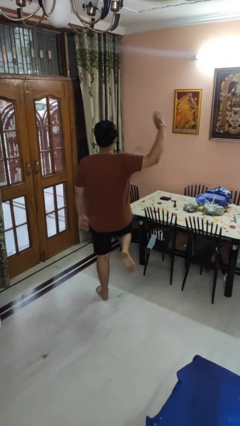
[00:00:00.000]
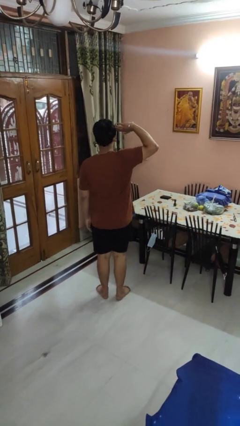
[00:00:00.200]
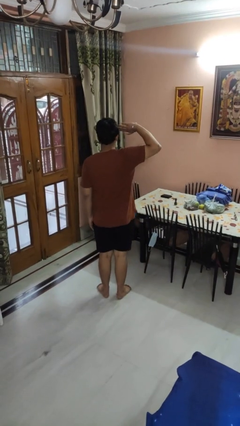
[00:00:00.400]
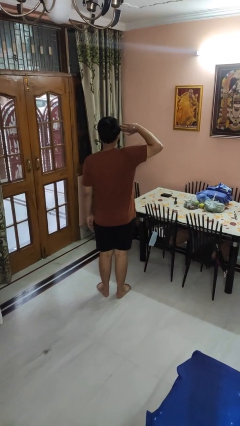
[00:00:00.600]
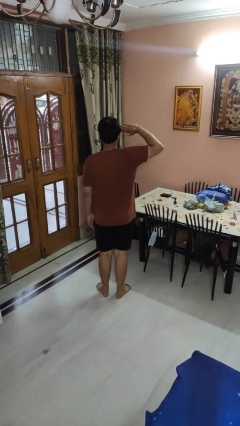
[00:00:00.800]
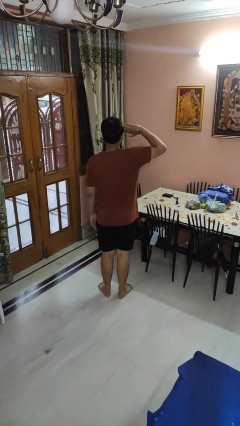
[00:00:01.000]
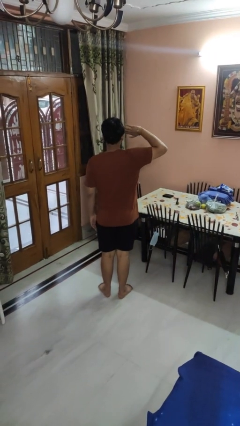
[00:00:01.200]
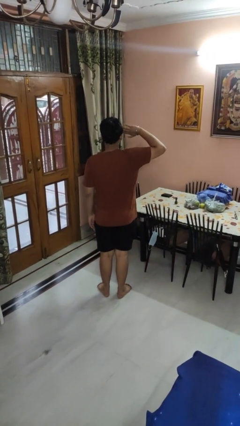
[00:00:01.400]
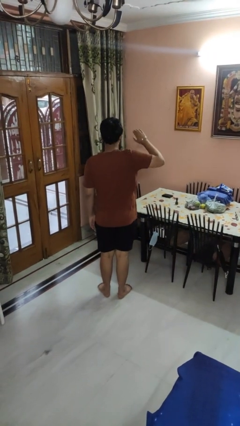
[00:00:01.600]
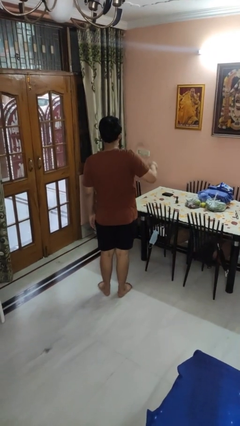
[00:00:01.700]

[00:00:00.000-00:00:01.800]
person salutes

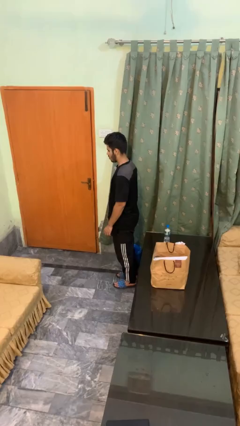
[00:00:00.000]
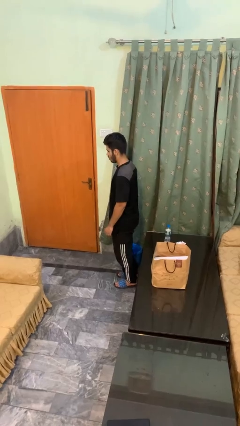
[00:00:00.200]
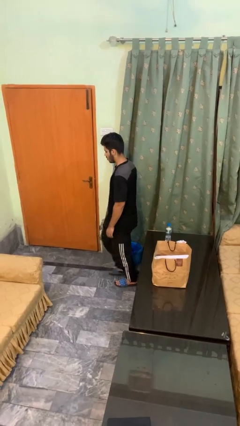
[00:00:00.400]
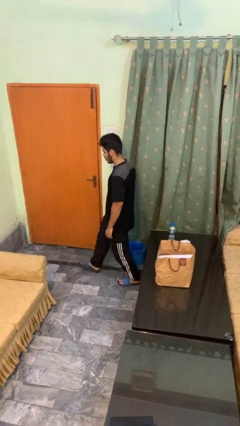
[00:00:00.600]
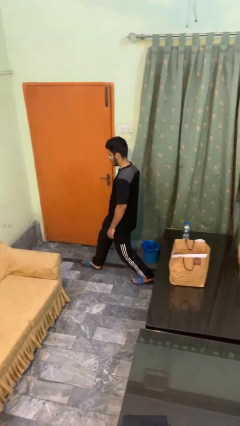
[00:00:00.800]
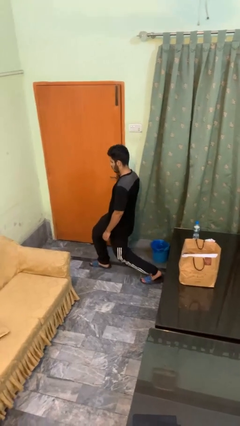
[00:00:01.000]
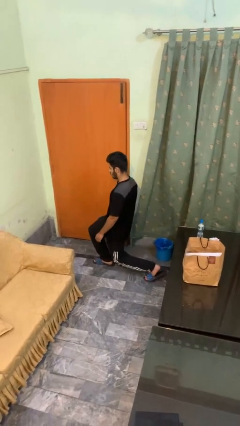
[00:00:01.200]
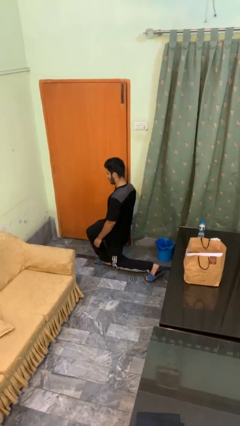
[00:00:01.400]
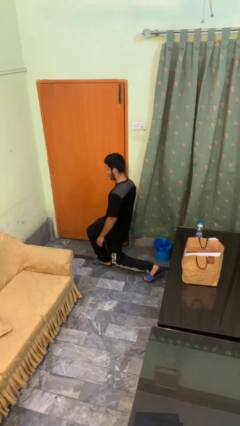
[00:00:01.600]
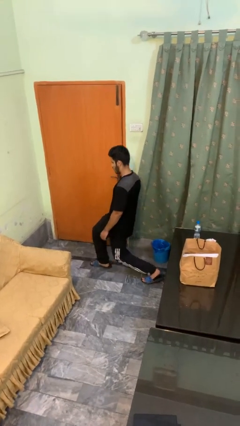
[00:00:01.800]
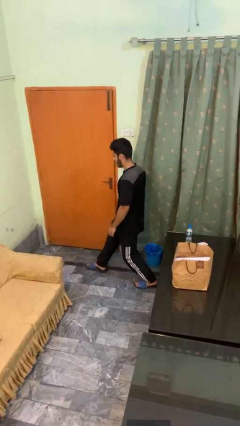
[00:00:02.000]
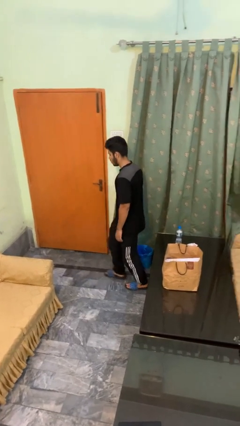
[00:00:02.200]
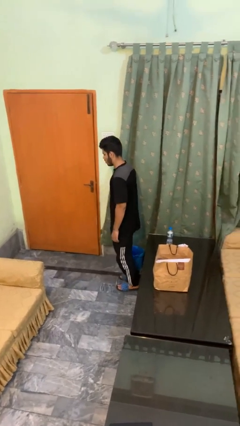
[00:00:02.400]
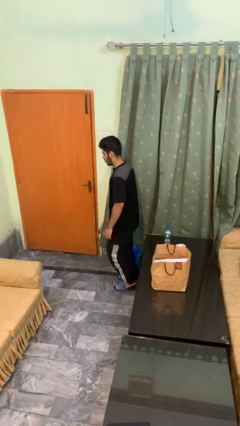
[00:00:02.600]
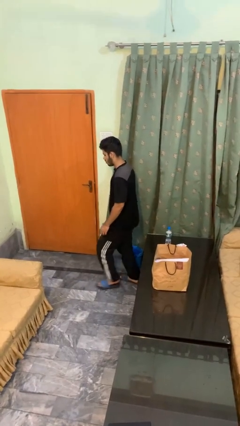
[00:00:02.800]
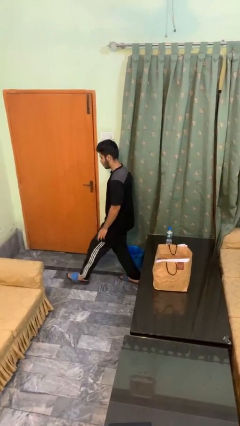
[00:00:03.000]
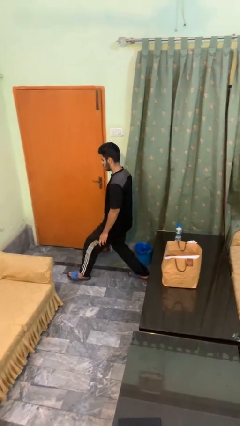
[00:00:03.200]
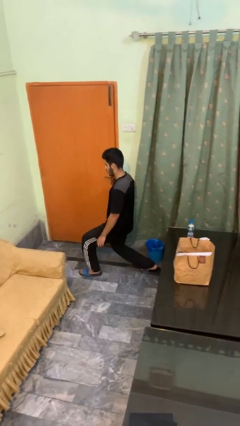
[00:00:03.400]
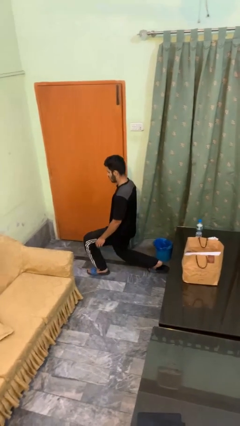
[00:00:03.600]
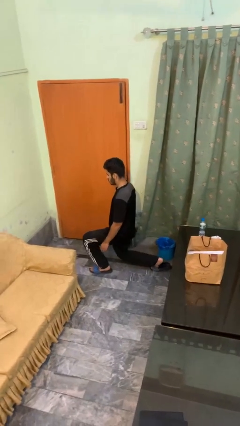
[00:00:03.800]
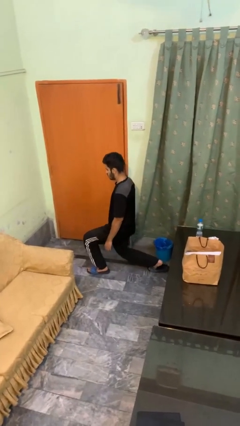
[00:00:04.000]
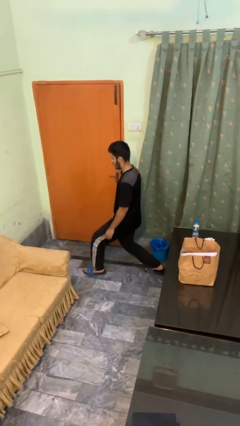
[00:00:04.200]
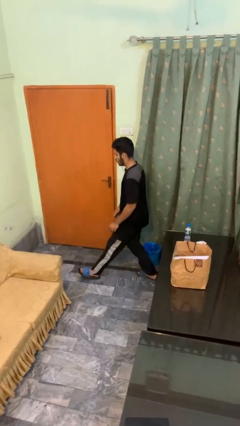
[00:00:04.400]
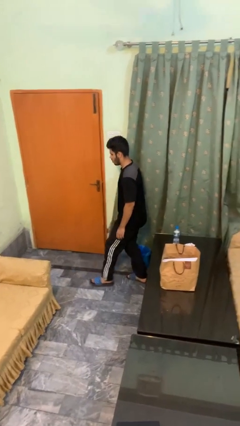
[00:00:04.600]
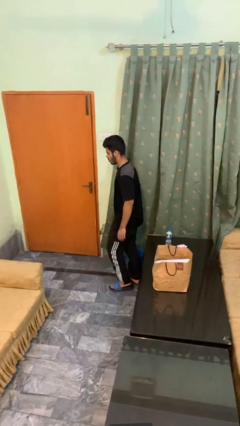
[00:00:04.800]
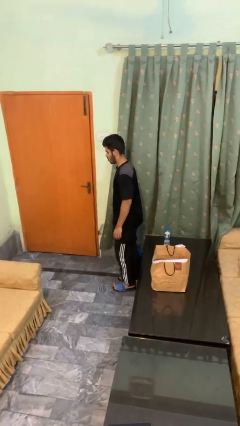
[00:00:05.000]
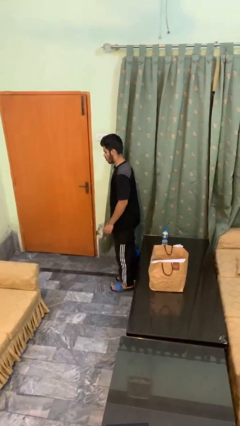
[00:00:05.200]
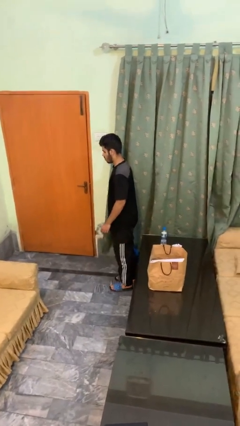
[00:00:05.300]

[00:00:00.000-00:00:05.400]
person exercises with lunges

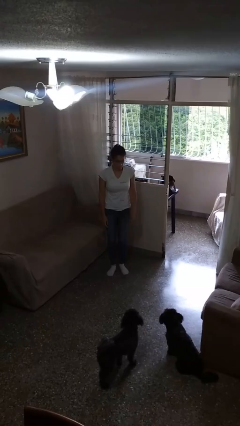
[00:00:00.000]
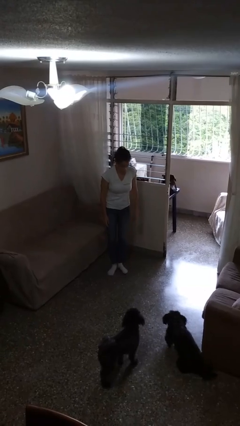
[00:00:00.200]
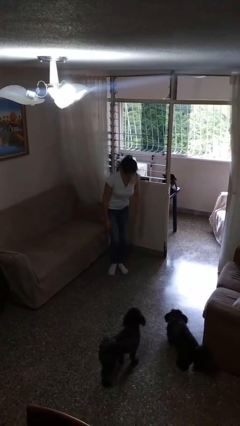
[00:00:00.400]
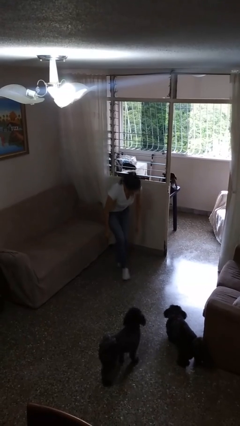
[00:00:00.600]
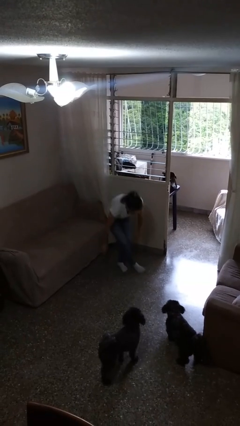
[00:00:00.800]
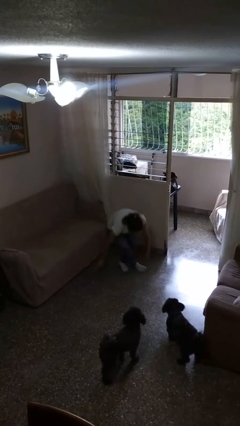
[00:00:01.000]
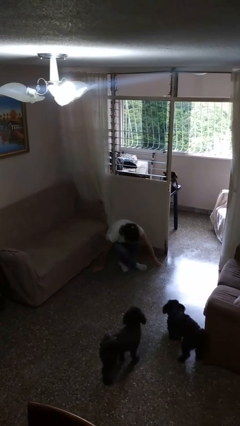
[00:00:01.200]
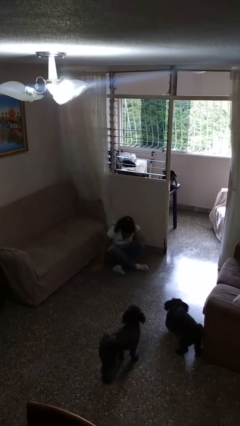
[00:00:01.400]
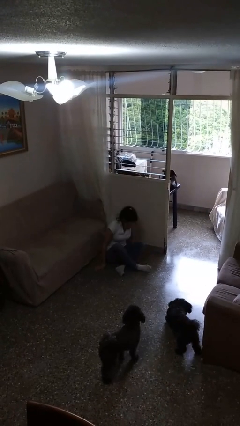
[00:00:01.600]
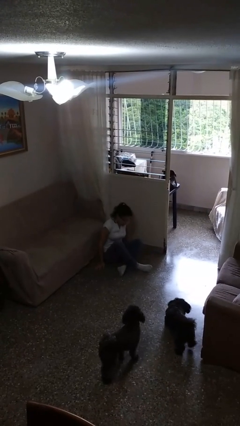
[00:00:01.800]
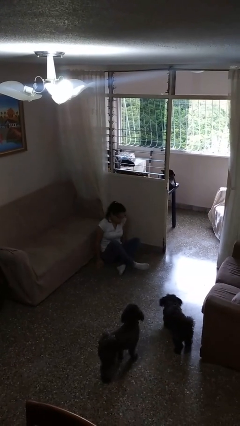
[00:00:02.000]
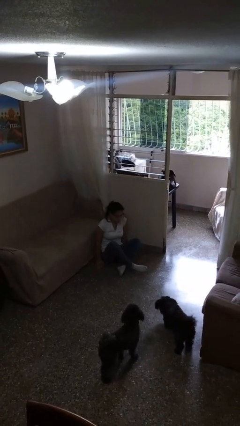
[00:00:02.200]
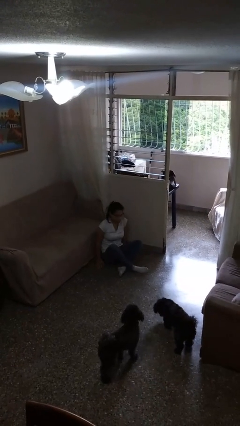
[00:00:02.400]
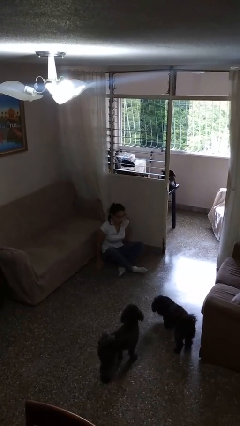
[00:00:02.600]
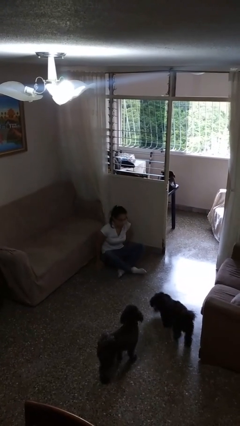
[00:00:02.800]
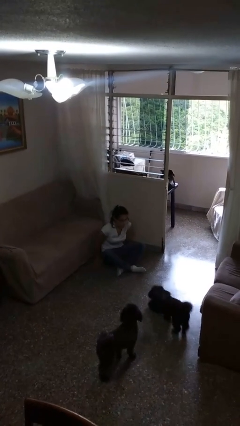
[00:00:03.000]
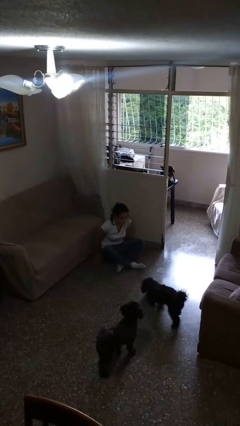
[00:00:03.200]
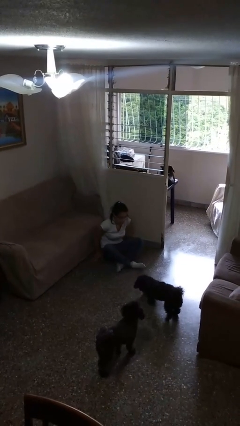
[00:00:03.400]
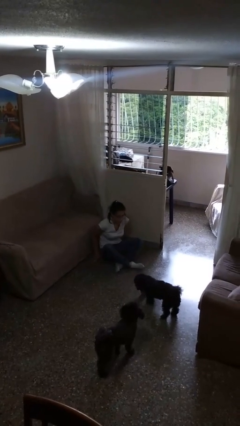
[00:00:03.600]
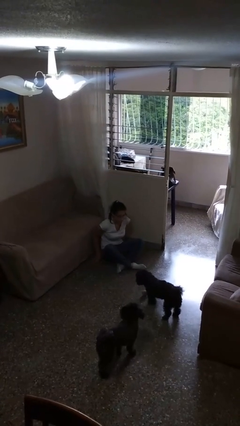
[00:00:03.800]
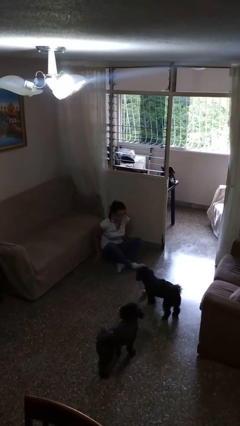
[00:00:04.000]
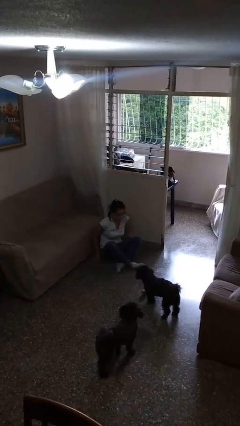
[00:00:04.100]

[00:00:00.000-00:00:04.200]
person sits crisscross

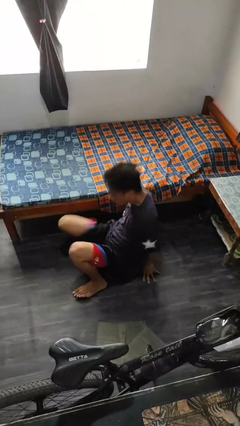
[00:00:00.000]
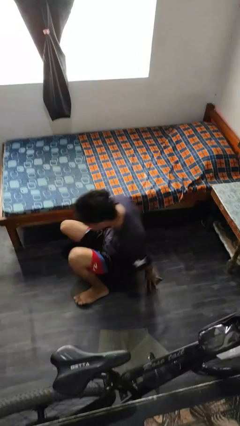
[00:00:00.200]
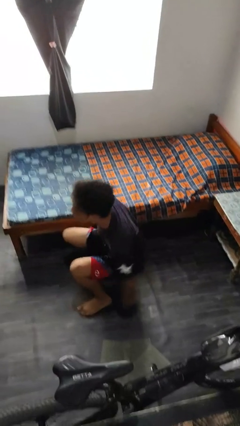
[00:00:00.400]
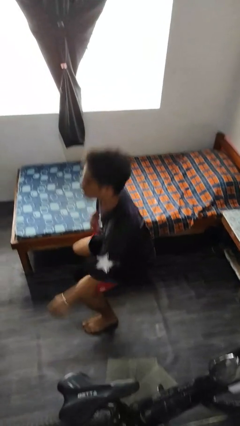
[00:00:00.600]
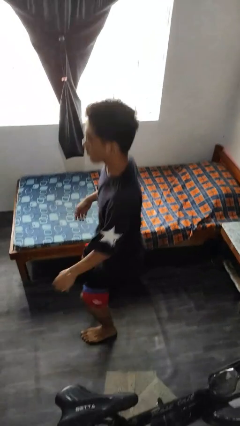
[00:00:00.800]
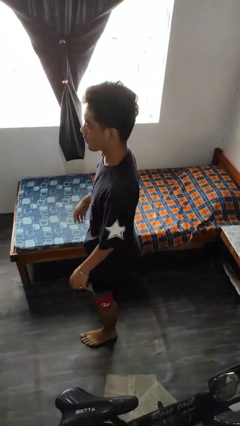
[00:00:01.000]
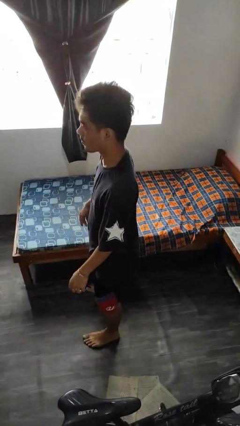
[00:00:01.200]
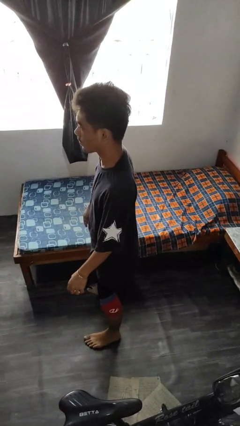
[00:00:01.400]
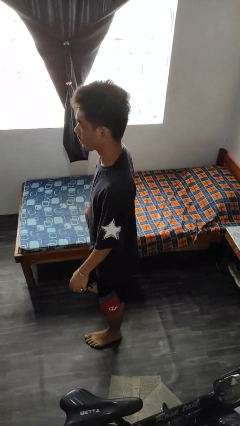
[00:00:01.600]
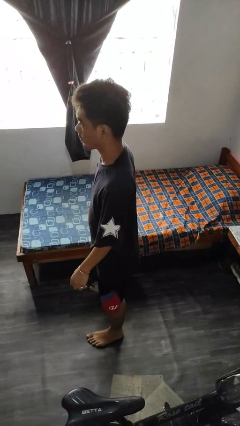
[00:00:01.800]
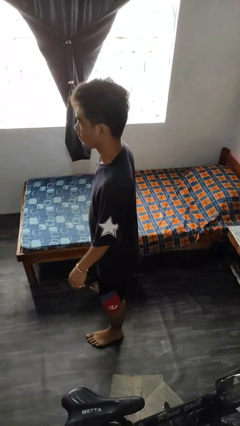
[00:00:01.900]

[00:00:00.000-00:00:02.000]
person stands up from floor

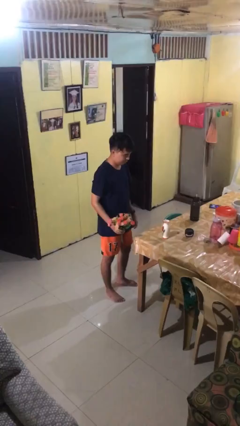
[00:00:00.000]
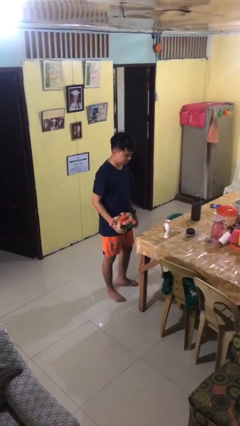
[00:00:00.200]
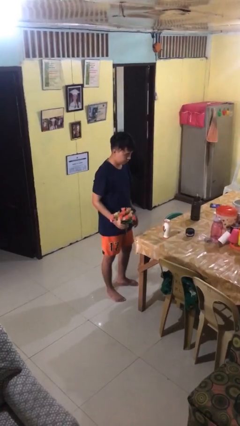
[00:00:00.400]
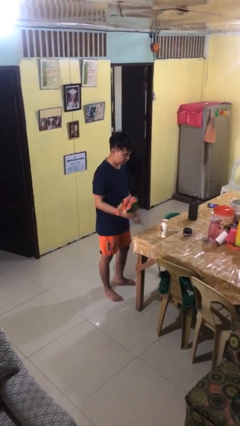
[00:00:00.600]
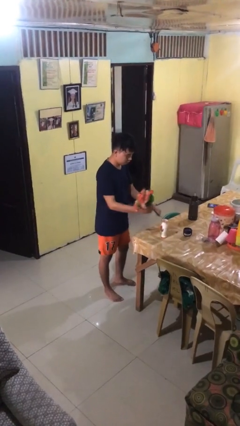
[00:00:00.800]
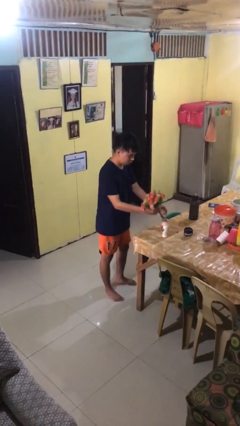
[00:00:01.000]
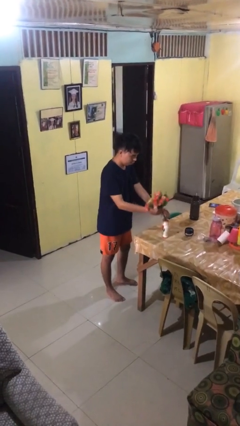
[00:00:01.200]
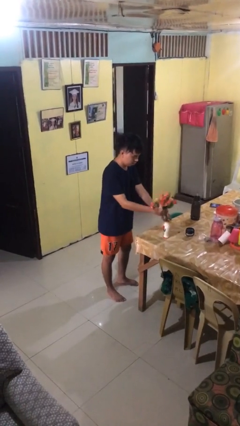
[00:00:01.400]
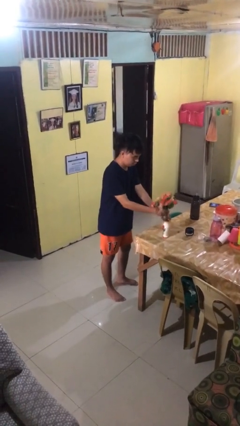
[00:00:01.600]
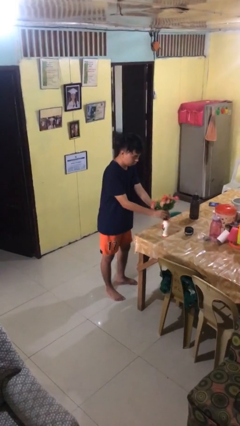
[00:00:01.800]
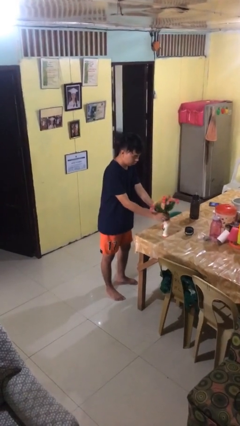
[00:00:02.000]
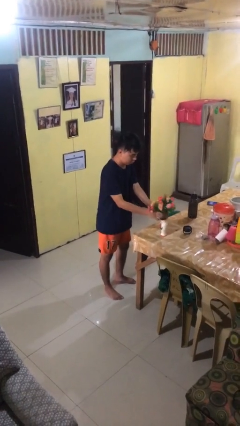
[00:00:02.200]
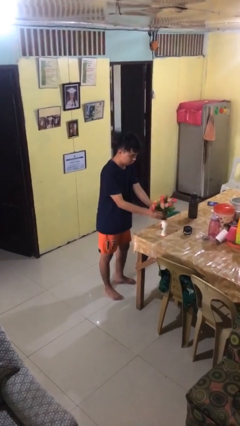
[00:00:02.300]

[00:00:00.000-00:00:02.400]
person arranges flowers in vase

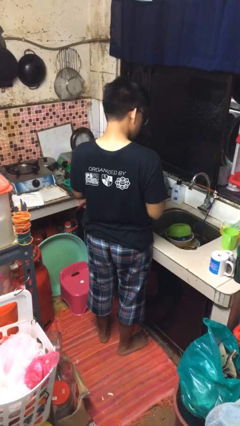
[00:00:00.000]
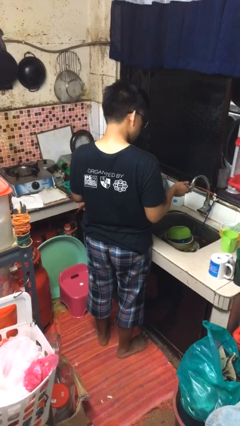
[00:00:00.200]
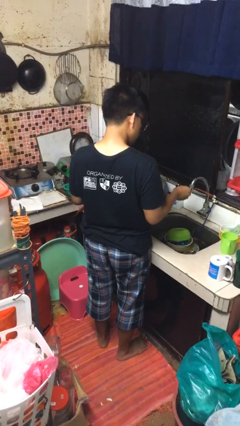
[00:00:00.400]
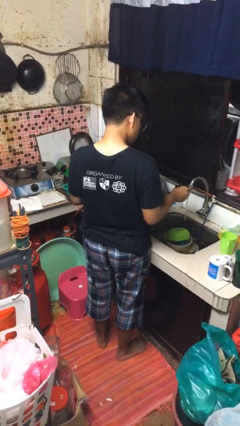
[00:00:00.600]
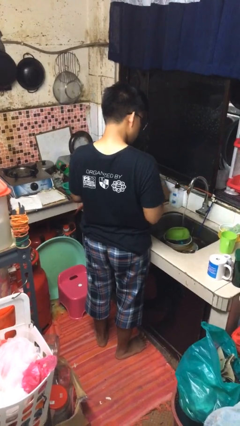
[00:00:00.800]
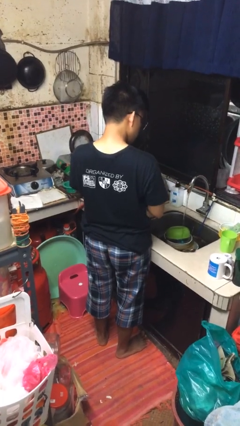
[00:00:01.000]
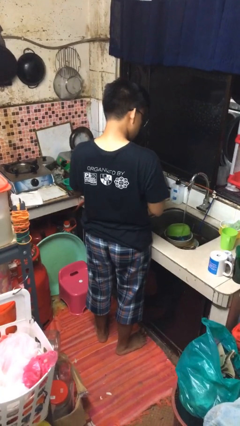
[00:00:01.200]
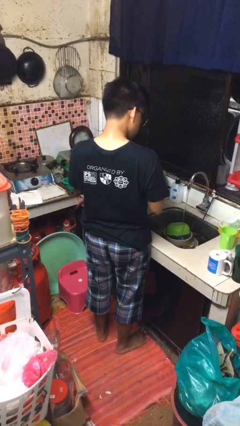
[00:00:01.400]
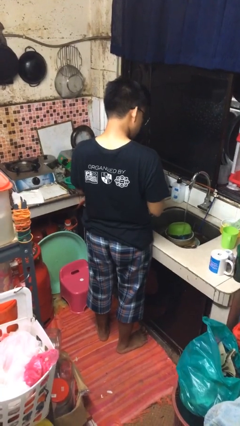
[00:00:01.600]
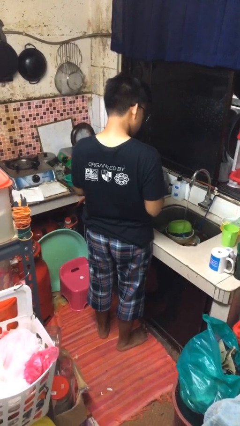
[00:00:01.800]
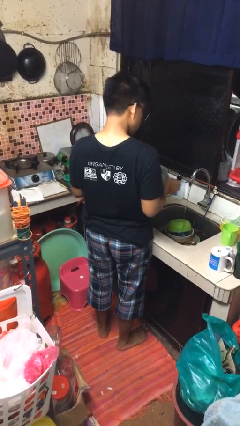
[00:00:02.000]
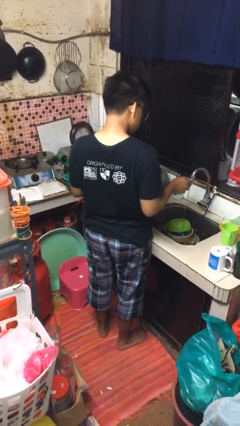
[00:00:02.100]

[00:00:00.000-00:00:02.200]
person turns on faucet
